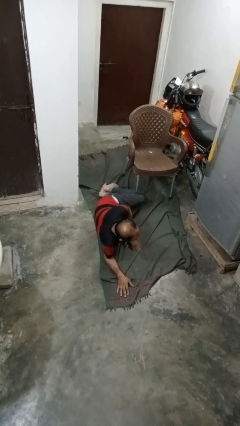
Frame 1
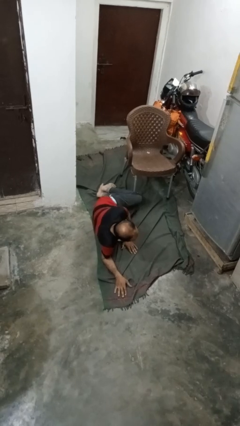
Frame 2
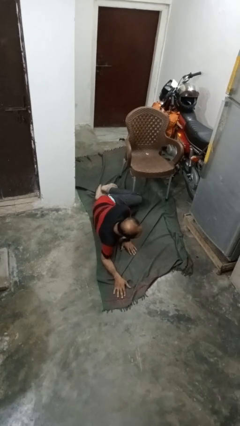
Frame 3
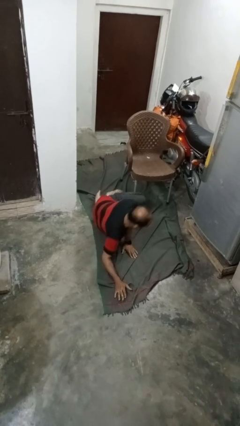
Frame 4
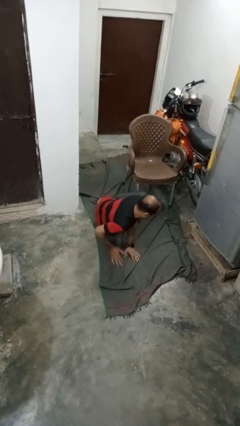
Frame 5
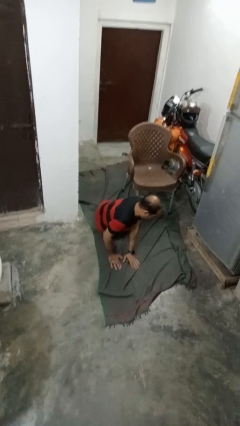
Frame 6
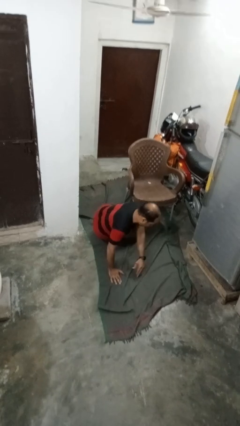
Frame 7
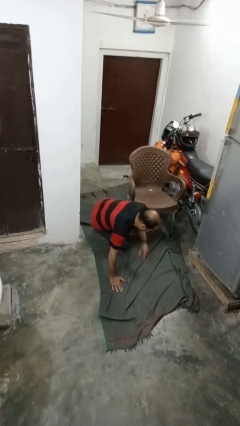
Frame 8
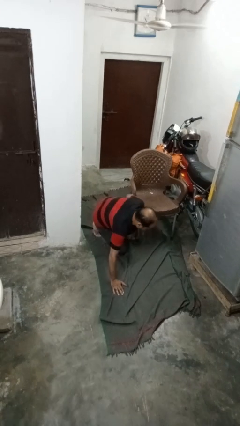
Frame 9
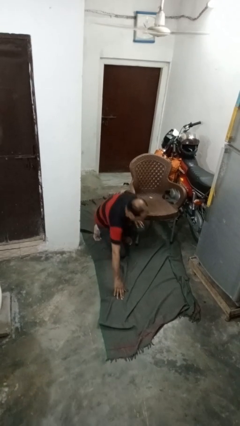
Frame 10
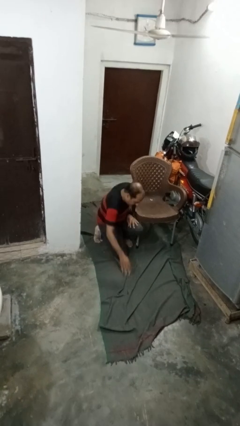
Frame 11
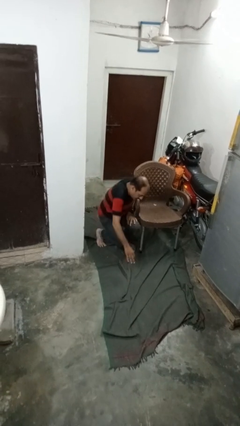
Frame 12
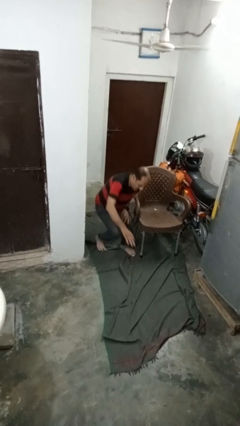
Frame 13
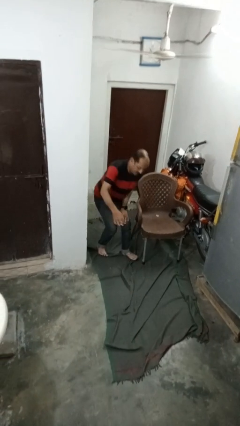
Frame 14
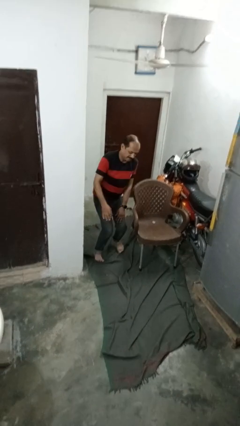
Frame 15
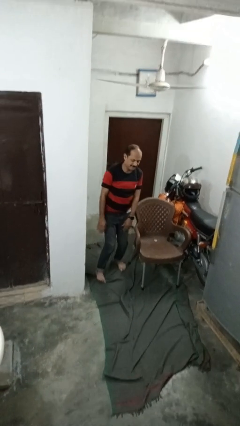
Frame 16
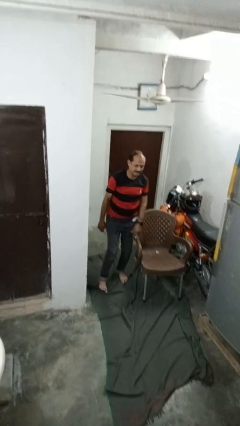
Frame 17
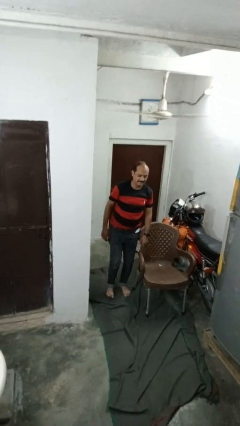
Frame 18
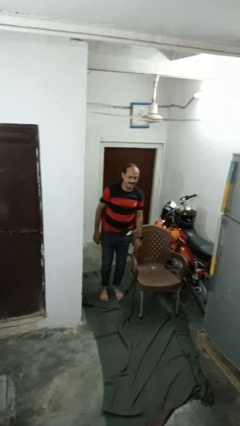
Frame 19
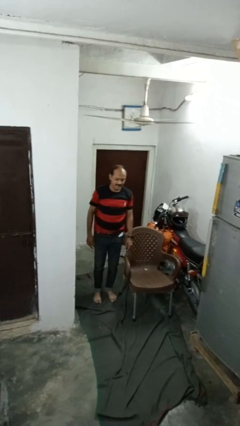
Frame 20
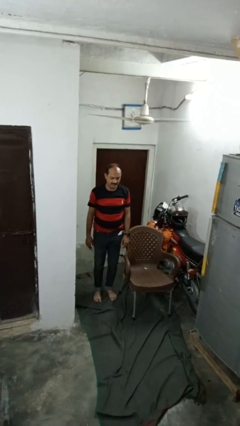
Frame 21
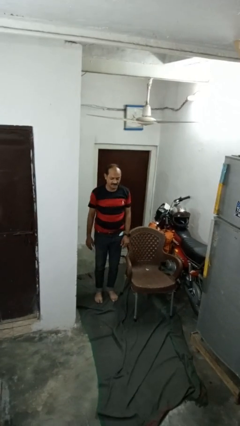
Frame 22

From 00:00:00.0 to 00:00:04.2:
person stands up from floor

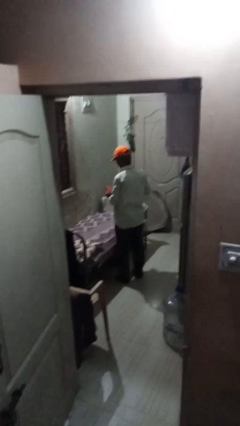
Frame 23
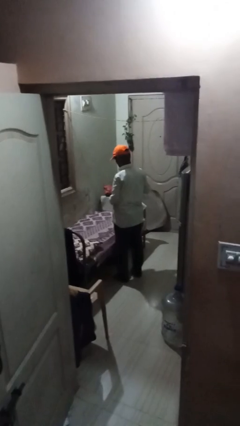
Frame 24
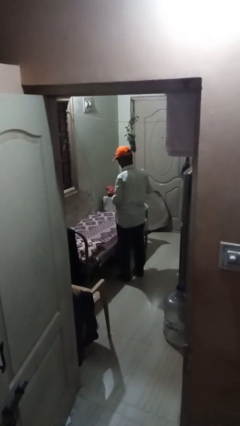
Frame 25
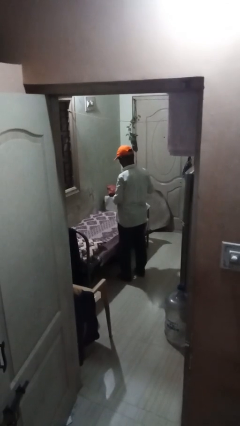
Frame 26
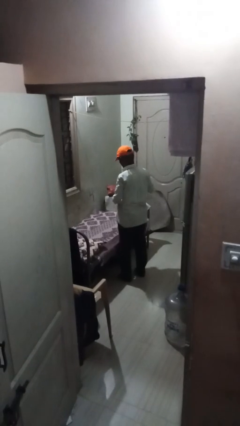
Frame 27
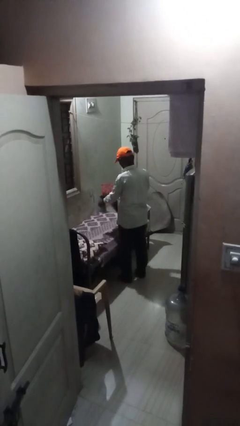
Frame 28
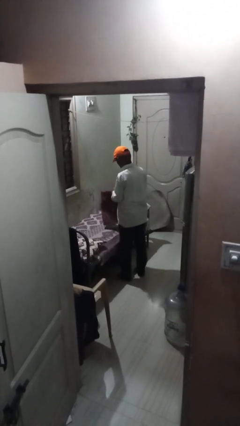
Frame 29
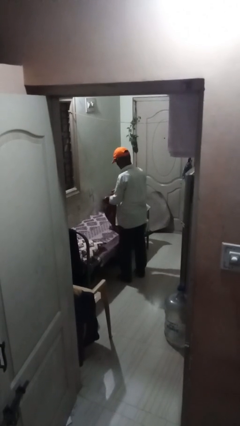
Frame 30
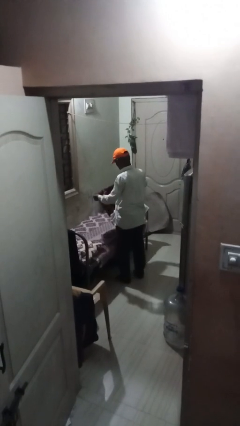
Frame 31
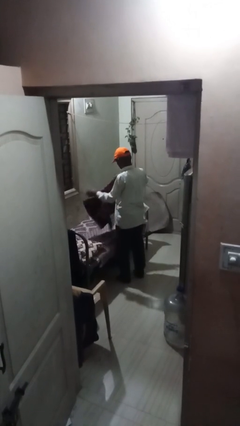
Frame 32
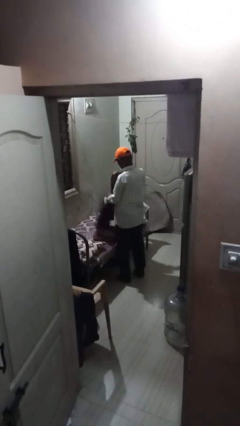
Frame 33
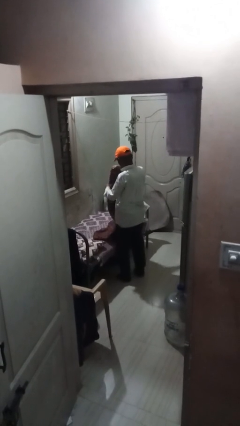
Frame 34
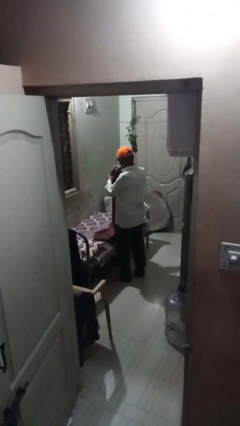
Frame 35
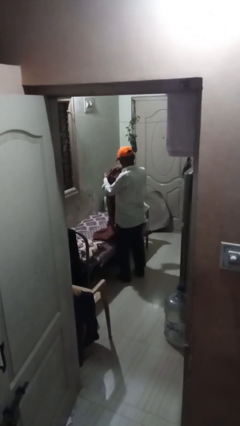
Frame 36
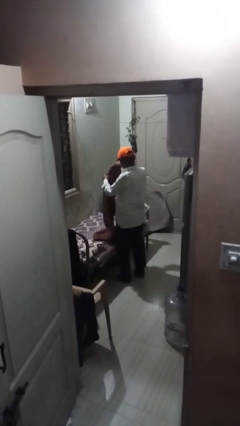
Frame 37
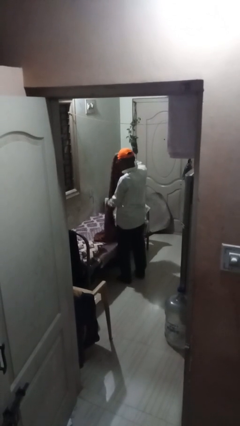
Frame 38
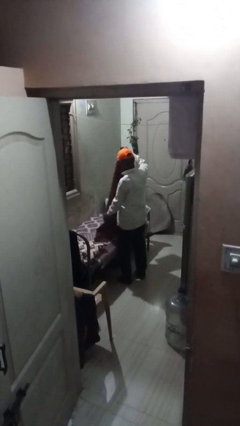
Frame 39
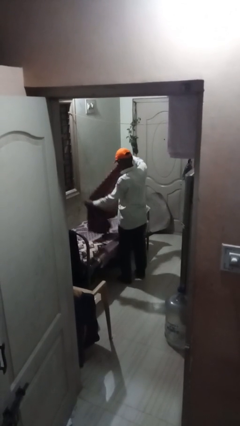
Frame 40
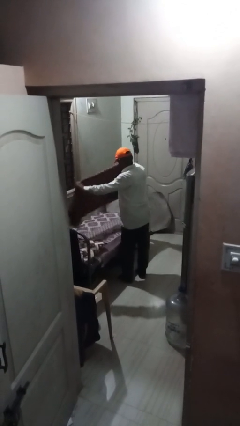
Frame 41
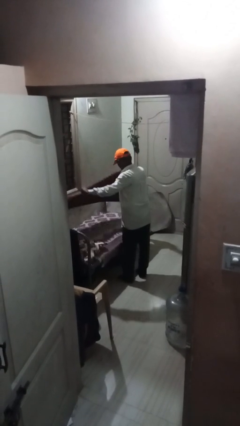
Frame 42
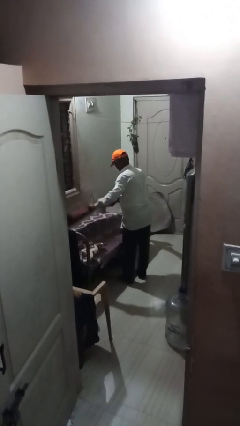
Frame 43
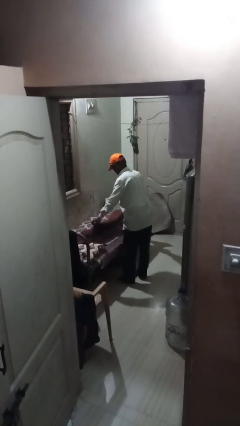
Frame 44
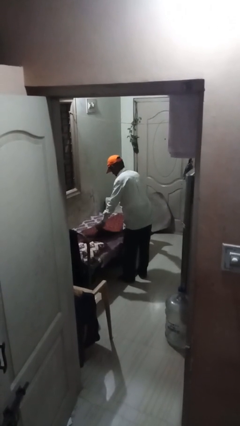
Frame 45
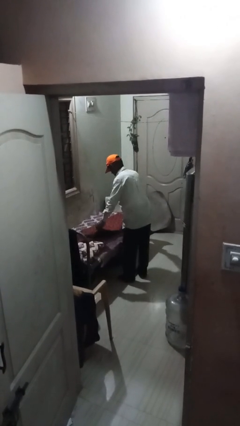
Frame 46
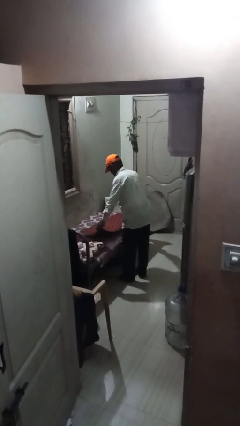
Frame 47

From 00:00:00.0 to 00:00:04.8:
person unfolds blanket

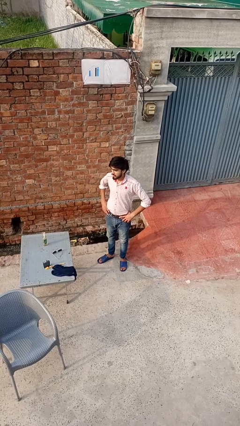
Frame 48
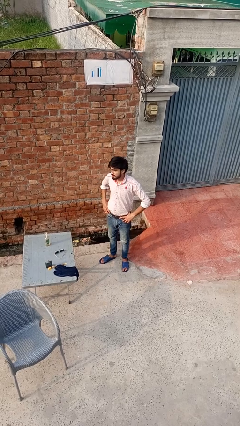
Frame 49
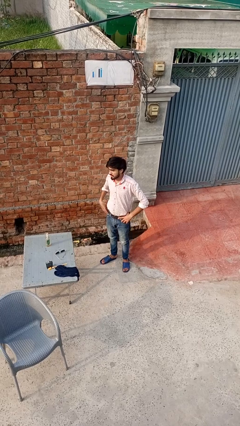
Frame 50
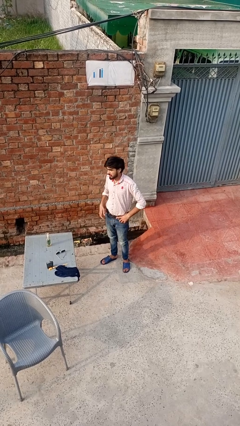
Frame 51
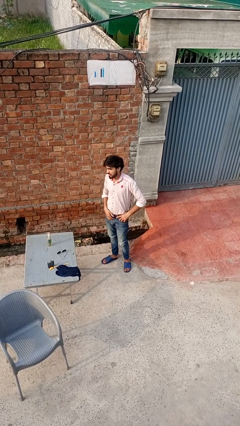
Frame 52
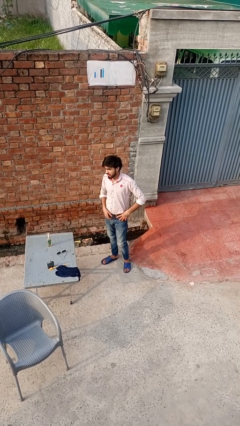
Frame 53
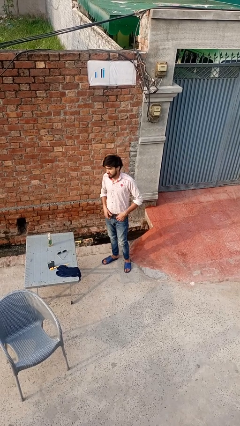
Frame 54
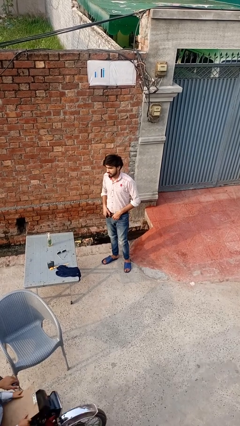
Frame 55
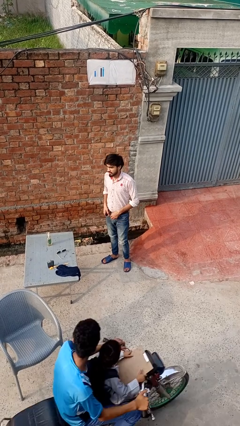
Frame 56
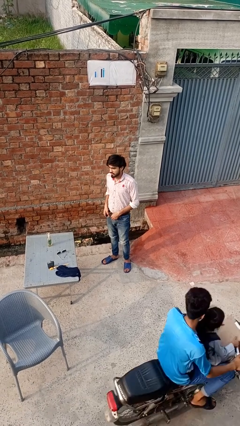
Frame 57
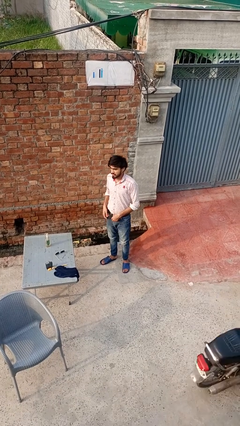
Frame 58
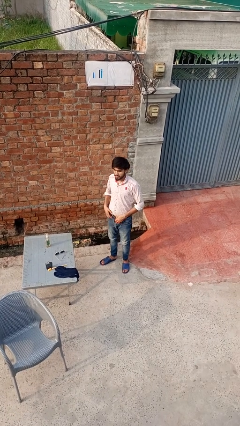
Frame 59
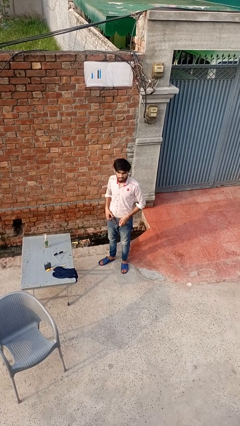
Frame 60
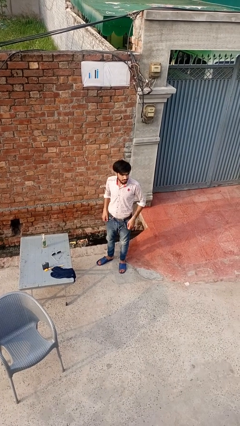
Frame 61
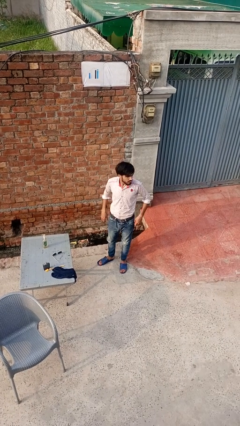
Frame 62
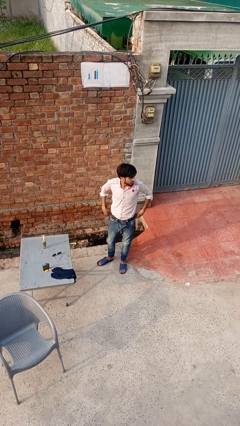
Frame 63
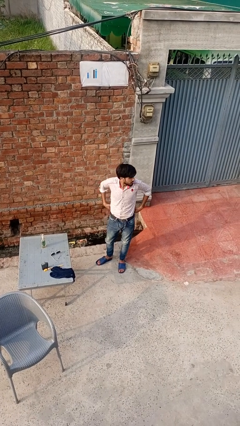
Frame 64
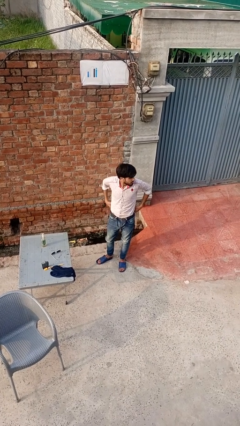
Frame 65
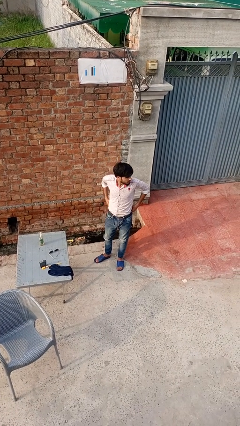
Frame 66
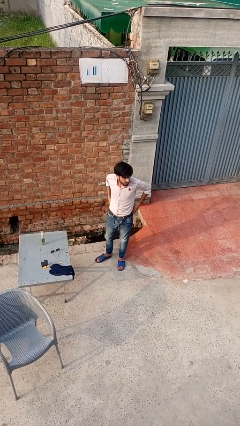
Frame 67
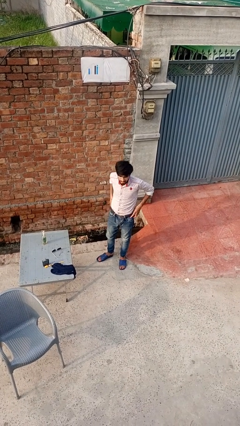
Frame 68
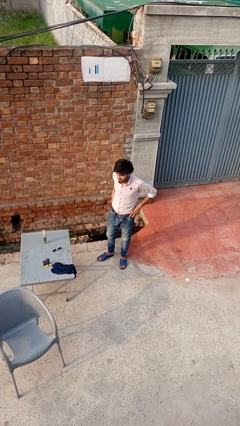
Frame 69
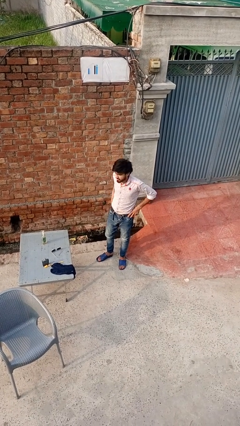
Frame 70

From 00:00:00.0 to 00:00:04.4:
person takes off belt

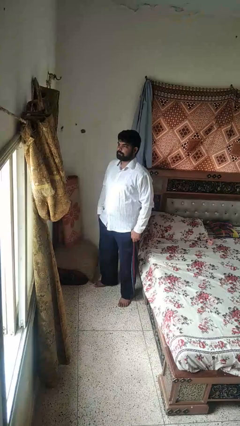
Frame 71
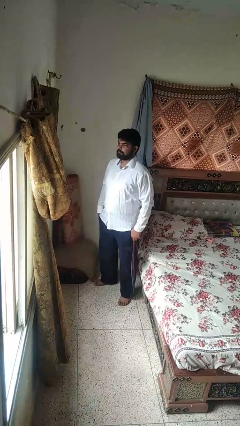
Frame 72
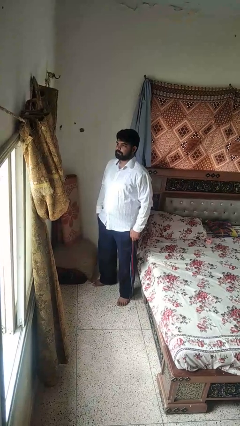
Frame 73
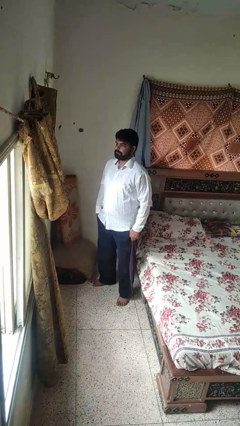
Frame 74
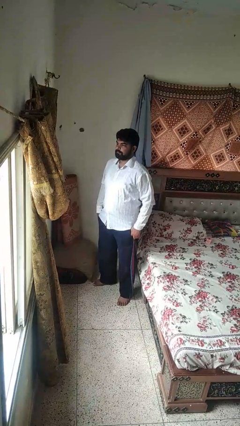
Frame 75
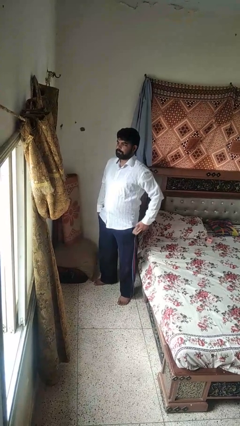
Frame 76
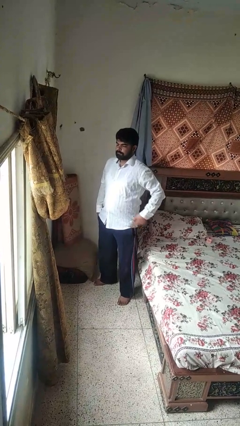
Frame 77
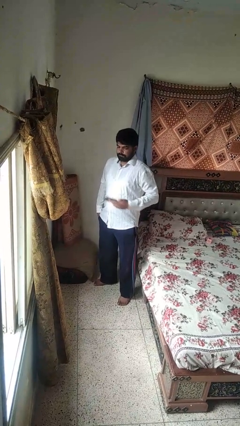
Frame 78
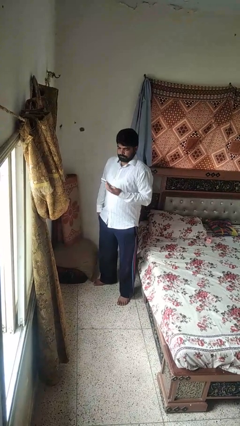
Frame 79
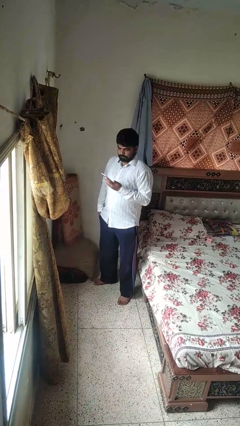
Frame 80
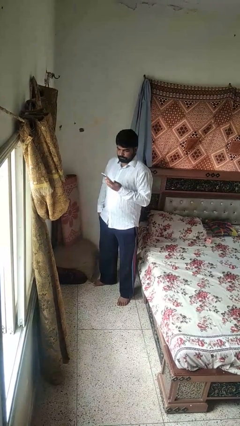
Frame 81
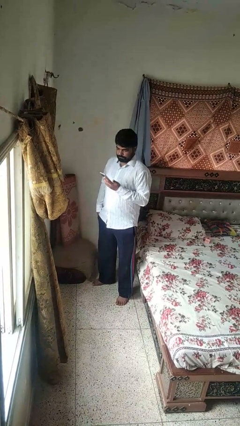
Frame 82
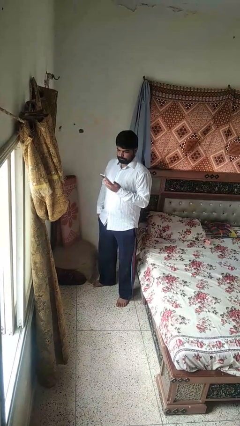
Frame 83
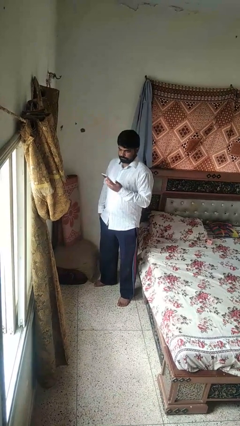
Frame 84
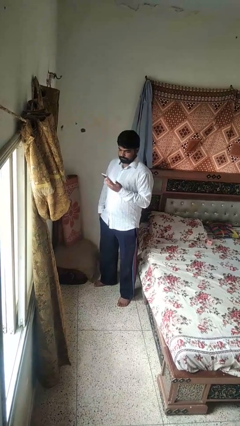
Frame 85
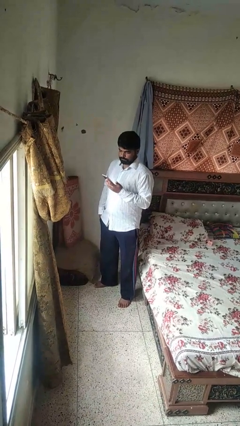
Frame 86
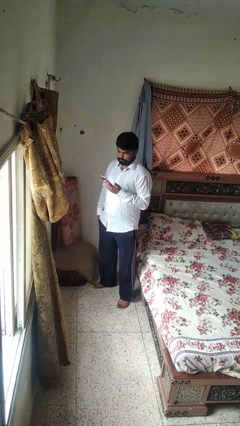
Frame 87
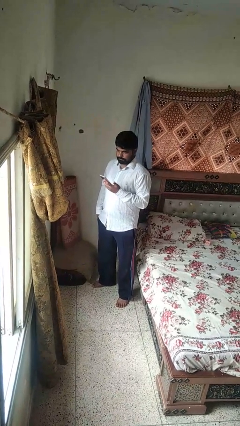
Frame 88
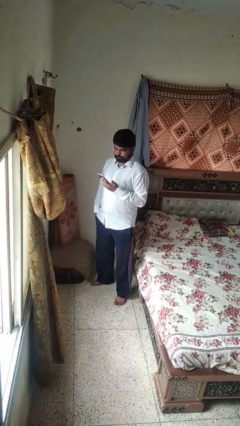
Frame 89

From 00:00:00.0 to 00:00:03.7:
person takes phone from pocket

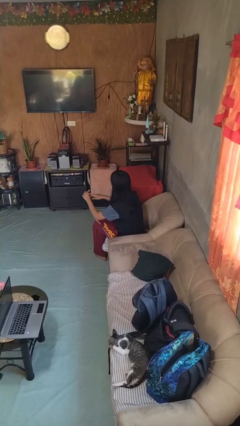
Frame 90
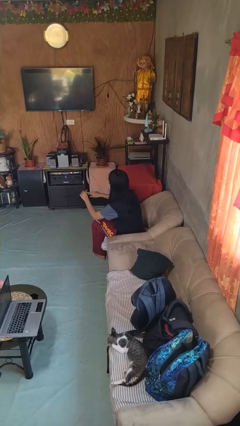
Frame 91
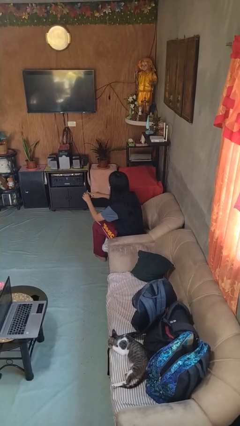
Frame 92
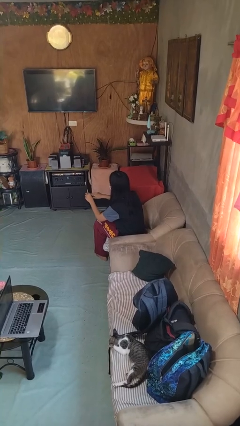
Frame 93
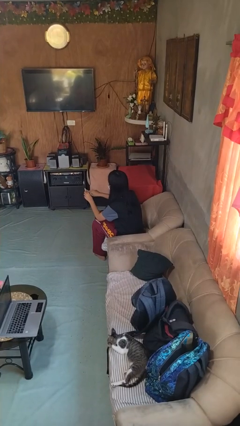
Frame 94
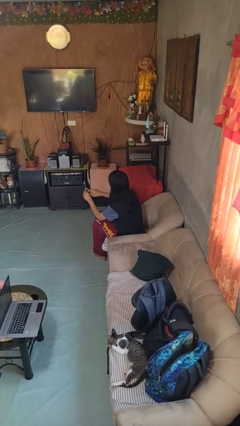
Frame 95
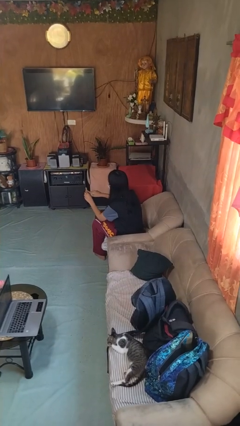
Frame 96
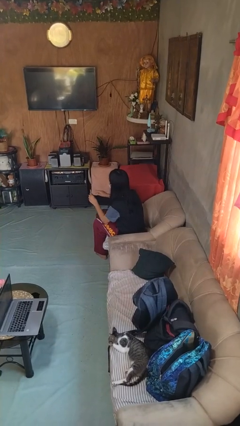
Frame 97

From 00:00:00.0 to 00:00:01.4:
person files fingernails
